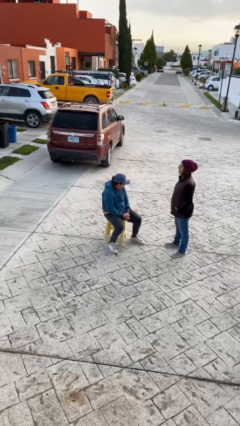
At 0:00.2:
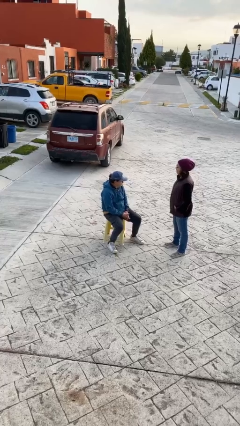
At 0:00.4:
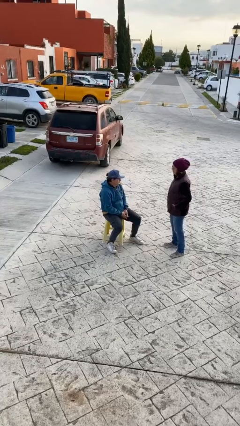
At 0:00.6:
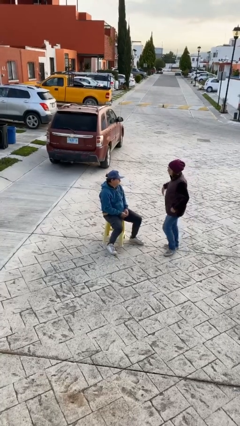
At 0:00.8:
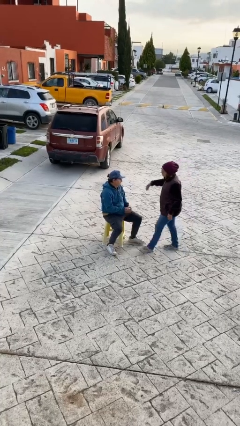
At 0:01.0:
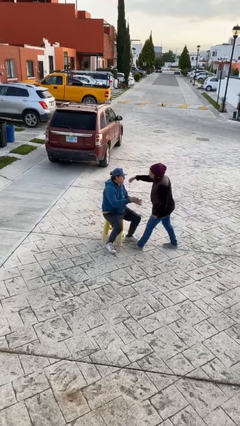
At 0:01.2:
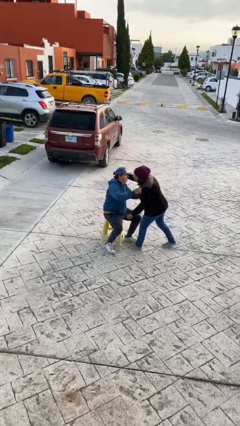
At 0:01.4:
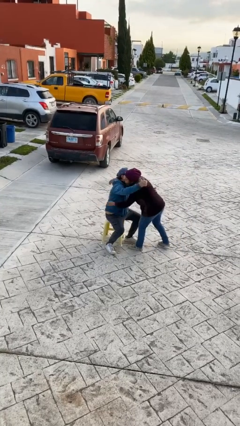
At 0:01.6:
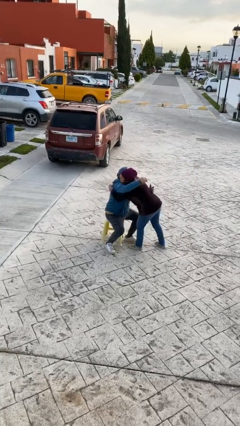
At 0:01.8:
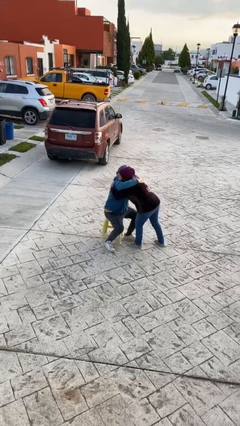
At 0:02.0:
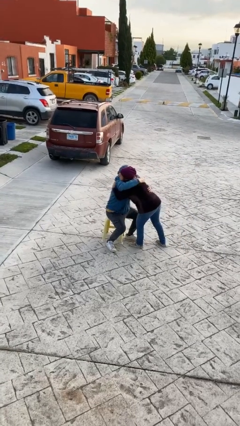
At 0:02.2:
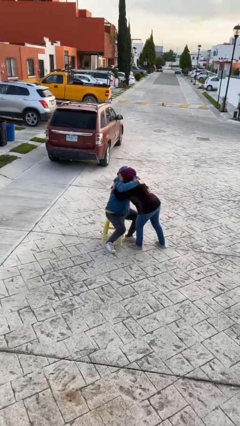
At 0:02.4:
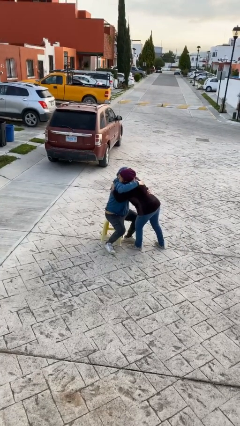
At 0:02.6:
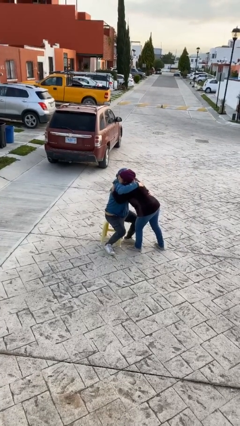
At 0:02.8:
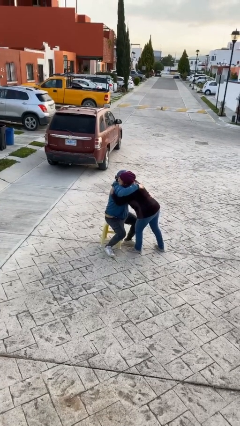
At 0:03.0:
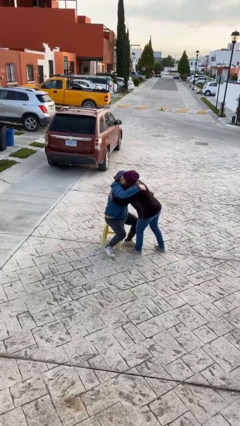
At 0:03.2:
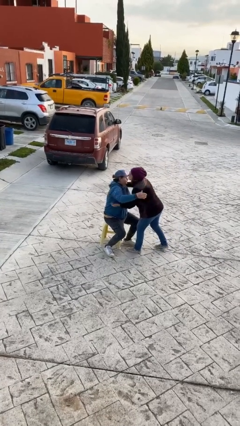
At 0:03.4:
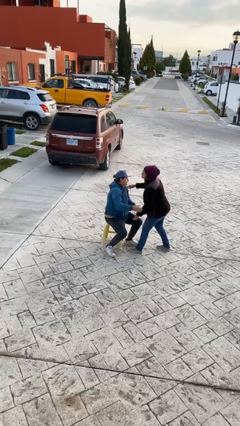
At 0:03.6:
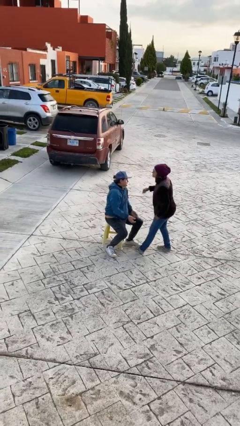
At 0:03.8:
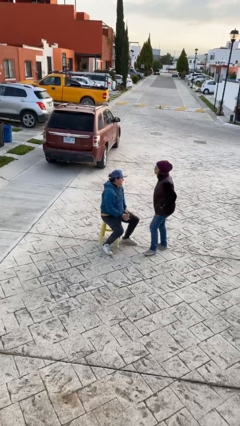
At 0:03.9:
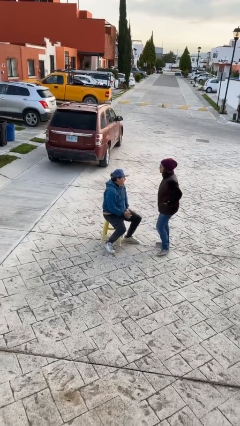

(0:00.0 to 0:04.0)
person embraces person

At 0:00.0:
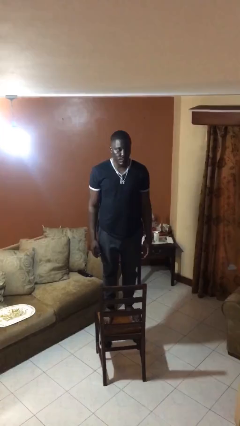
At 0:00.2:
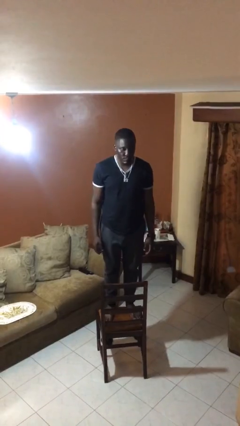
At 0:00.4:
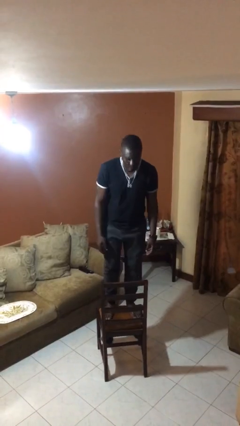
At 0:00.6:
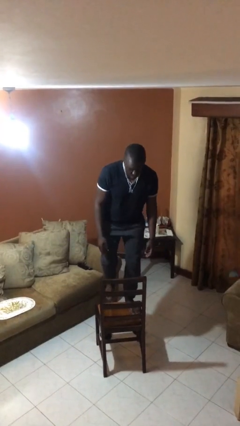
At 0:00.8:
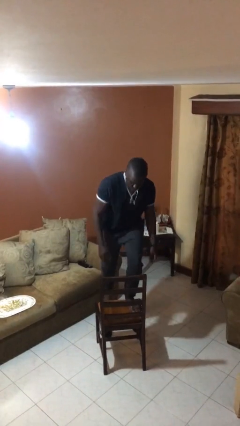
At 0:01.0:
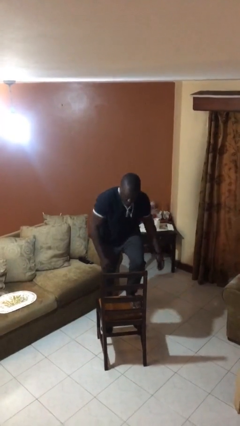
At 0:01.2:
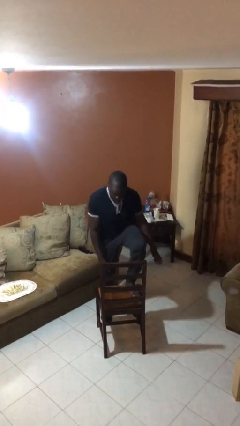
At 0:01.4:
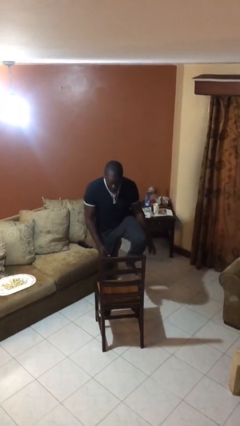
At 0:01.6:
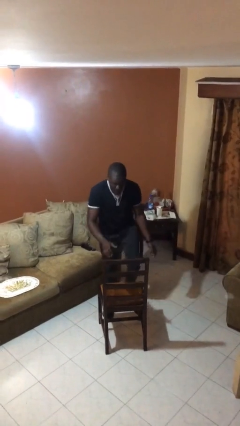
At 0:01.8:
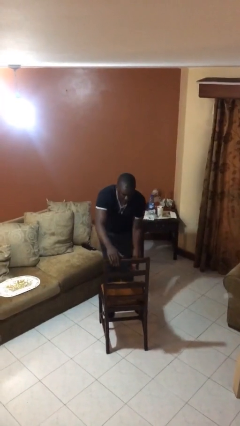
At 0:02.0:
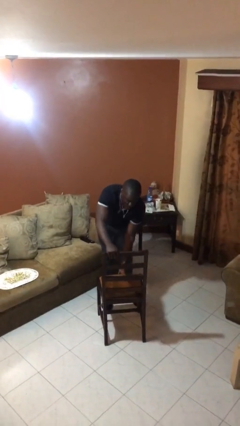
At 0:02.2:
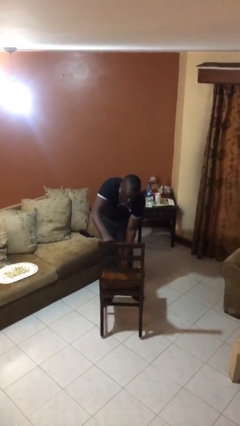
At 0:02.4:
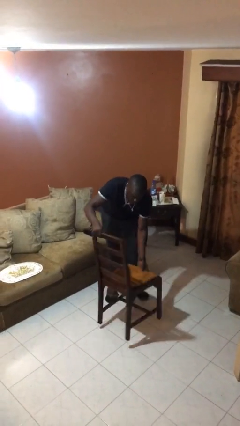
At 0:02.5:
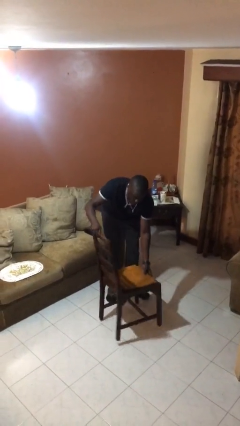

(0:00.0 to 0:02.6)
person climbs off chair

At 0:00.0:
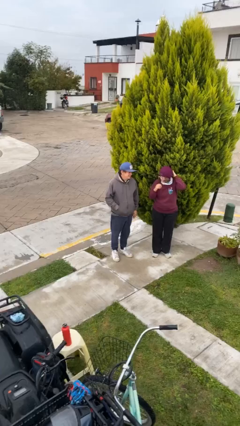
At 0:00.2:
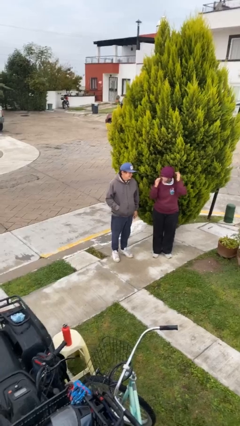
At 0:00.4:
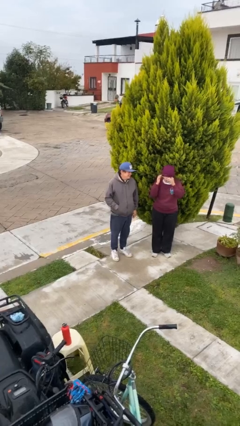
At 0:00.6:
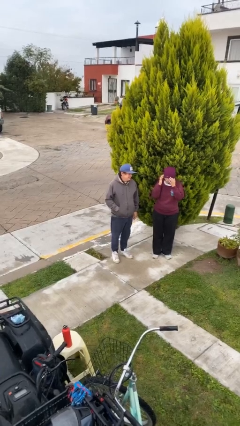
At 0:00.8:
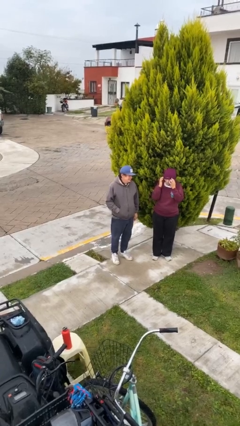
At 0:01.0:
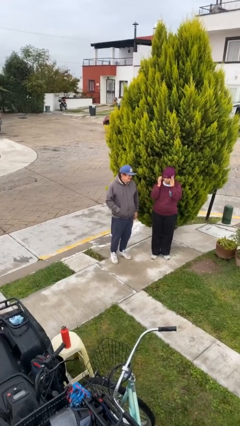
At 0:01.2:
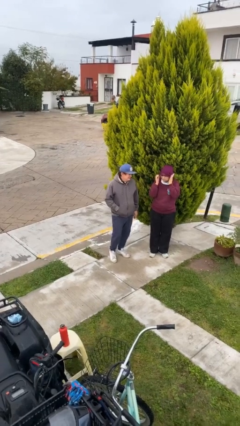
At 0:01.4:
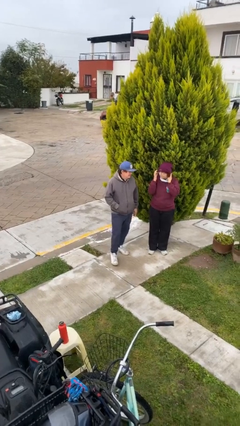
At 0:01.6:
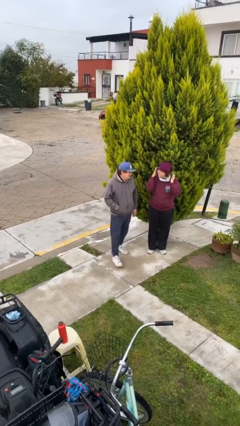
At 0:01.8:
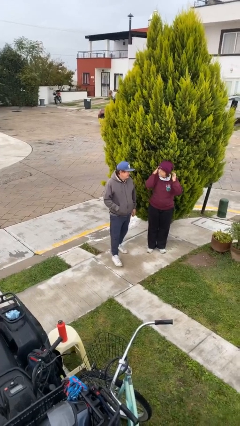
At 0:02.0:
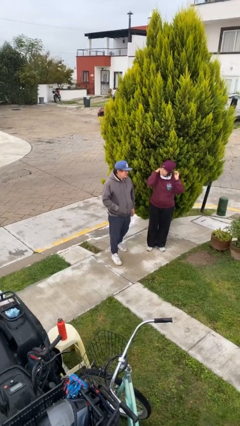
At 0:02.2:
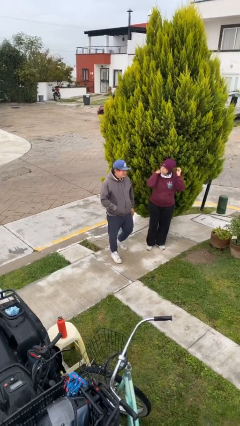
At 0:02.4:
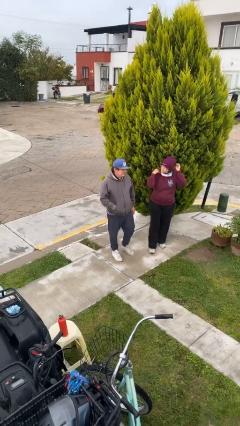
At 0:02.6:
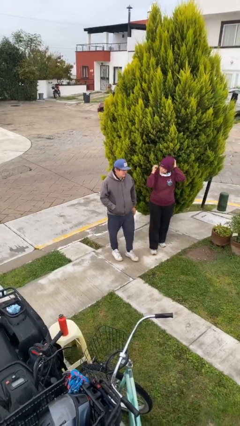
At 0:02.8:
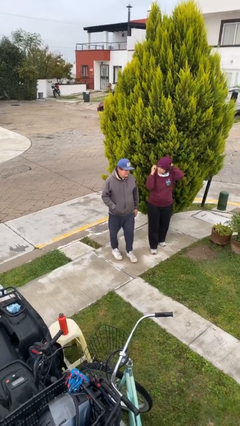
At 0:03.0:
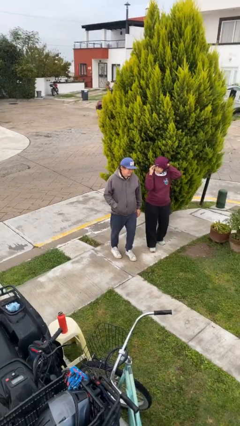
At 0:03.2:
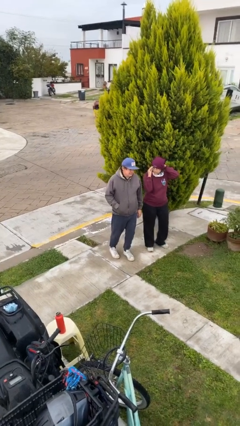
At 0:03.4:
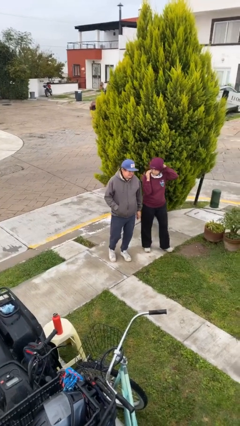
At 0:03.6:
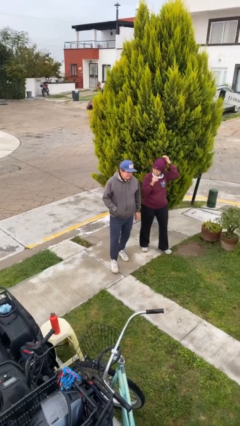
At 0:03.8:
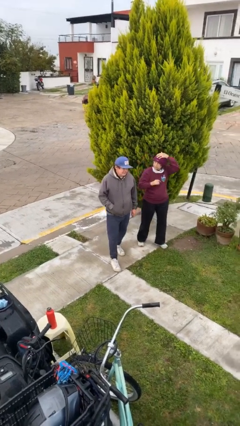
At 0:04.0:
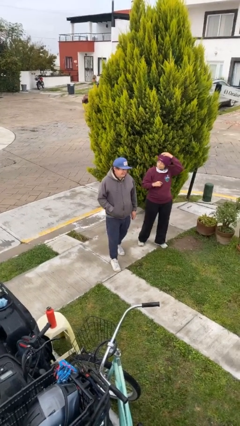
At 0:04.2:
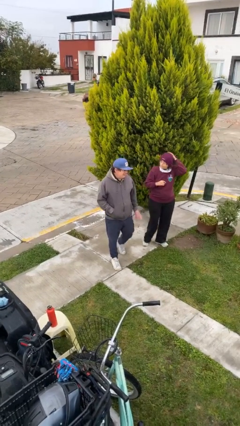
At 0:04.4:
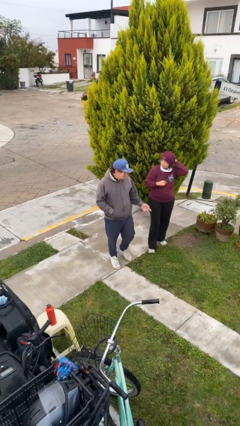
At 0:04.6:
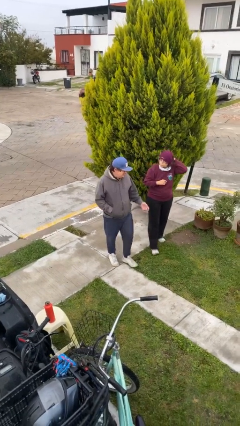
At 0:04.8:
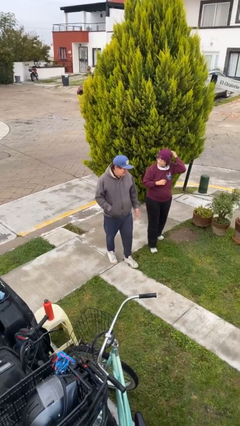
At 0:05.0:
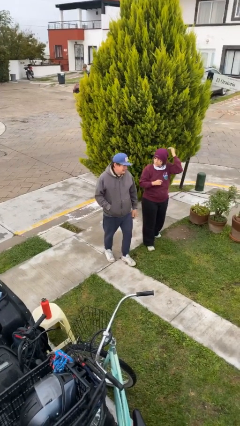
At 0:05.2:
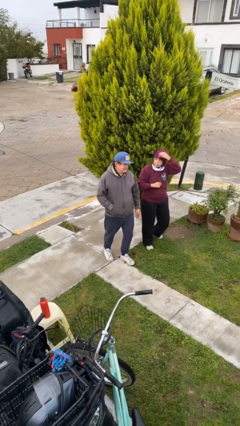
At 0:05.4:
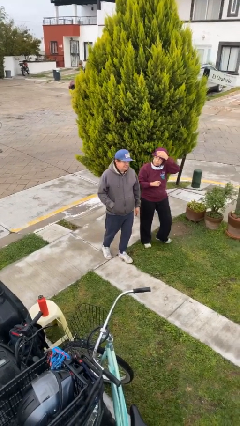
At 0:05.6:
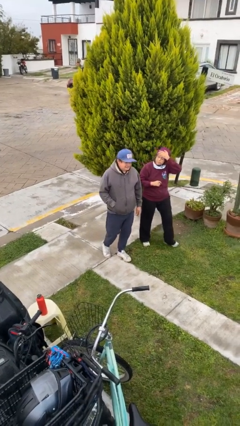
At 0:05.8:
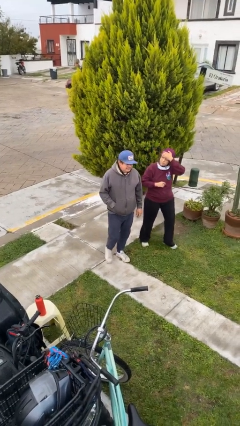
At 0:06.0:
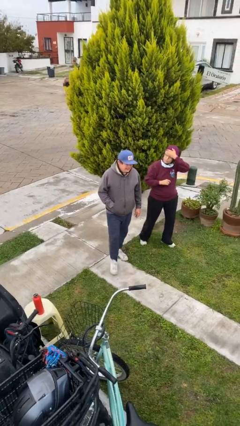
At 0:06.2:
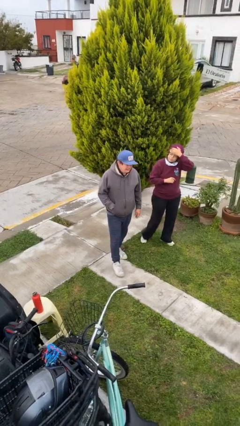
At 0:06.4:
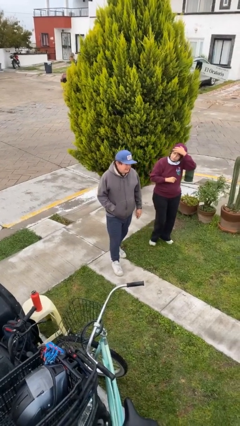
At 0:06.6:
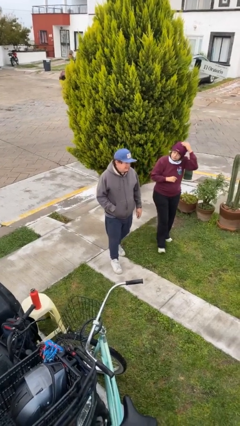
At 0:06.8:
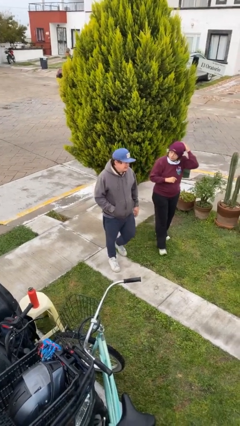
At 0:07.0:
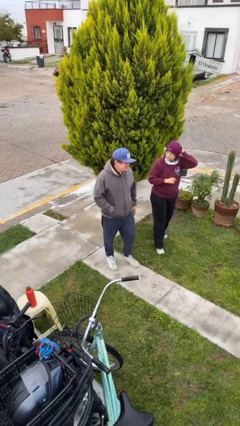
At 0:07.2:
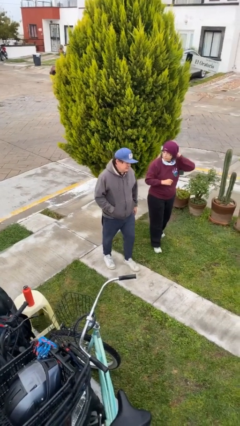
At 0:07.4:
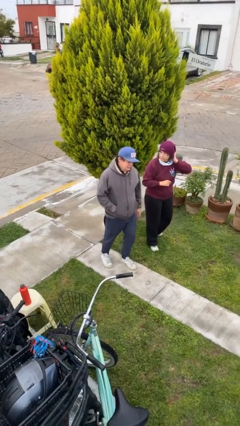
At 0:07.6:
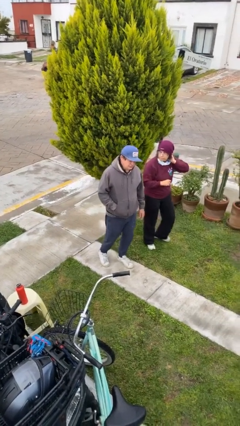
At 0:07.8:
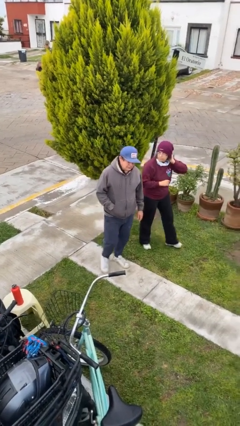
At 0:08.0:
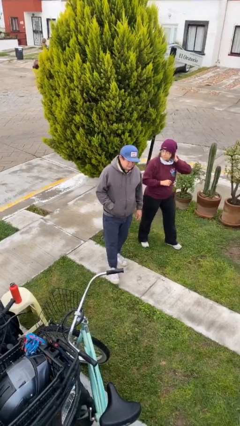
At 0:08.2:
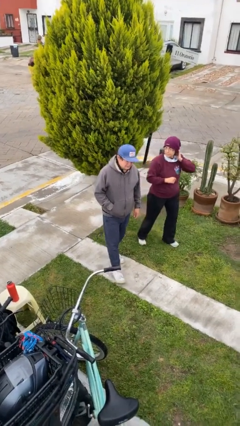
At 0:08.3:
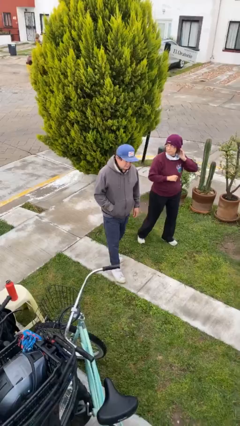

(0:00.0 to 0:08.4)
person talks to person

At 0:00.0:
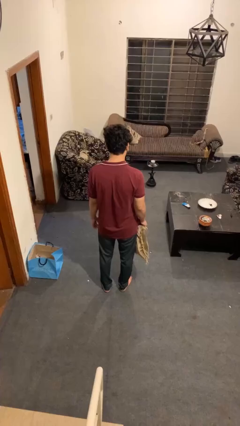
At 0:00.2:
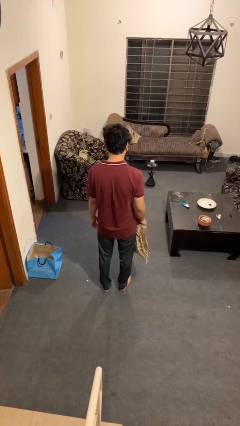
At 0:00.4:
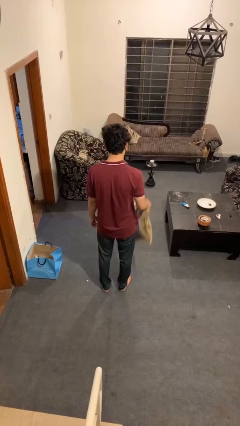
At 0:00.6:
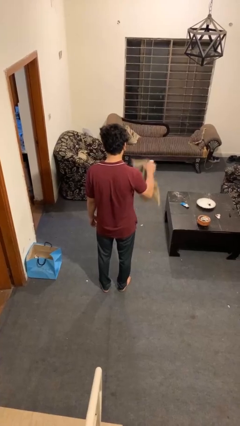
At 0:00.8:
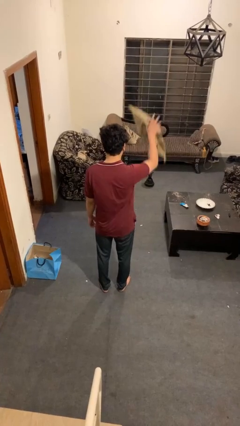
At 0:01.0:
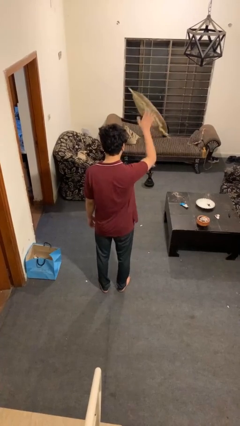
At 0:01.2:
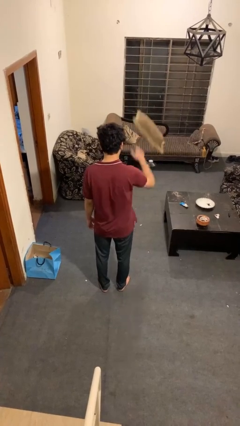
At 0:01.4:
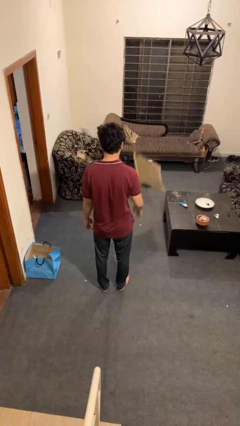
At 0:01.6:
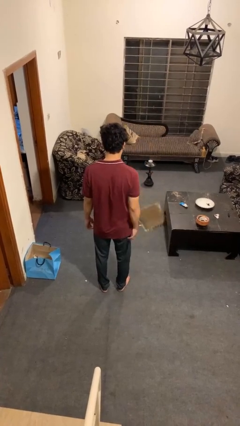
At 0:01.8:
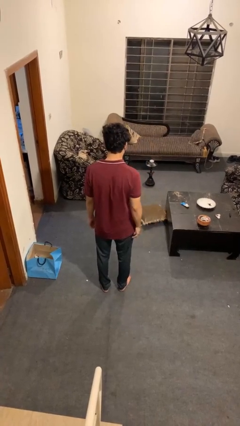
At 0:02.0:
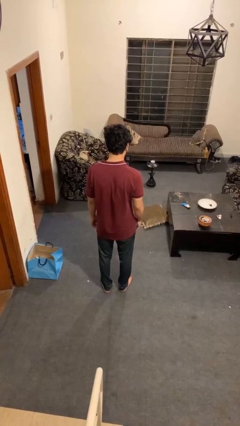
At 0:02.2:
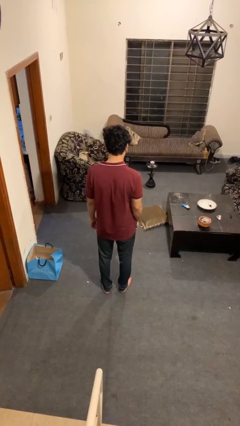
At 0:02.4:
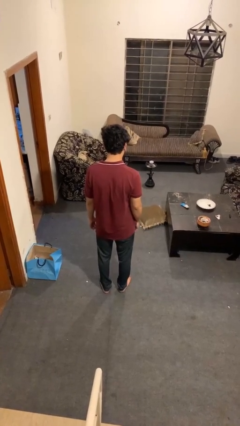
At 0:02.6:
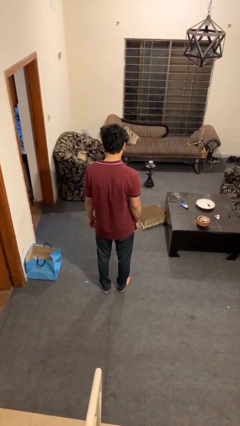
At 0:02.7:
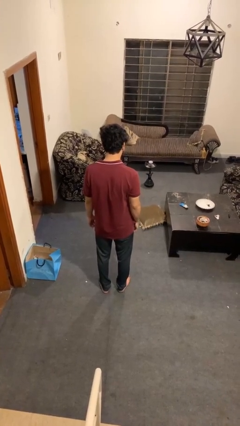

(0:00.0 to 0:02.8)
person throws object into air
